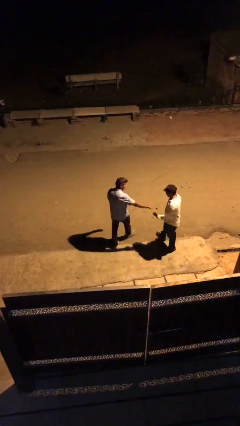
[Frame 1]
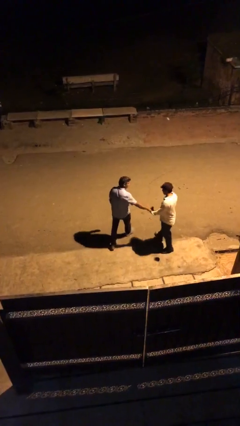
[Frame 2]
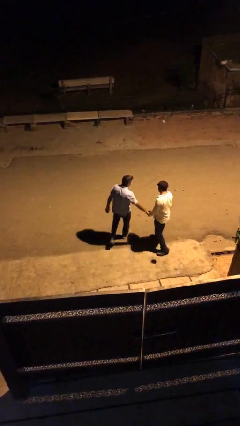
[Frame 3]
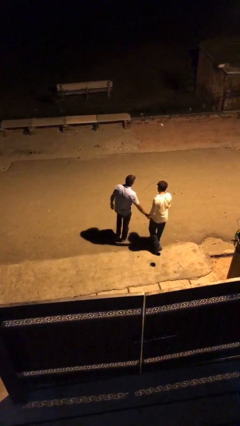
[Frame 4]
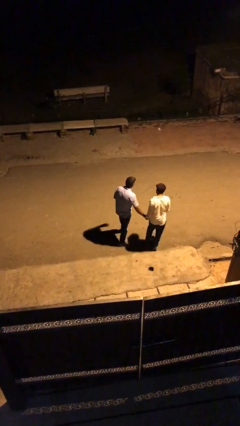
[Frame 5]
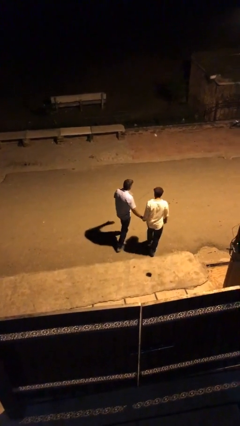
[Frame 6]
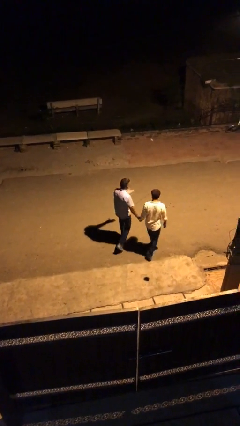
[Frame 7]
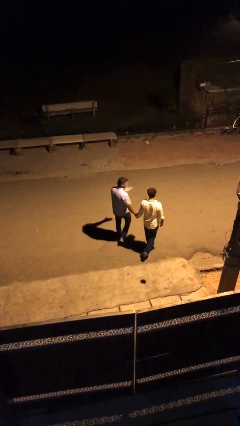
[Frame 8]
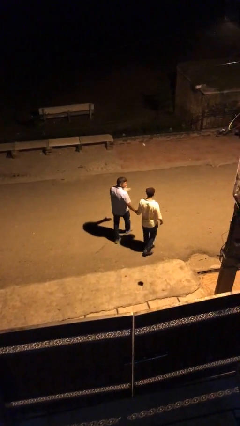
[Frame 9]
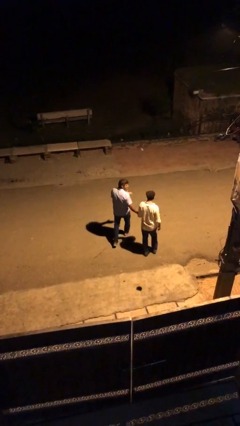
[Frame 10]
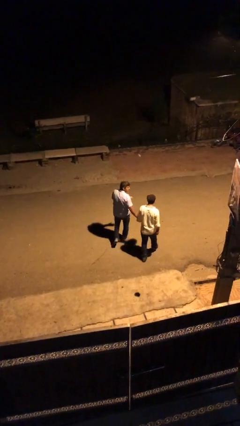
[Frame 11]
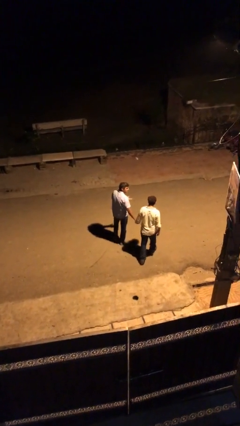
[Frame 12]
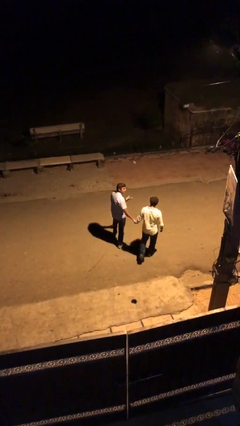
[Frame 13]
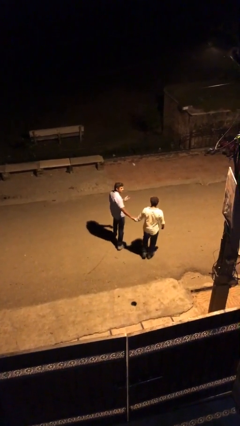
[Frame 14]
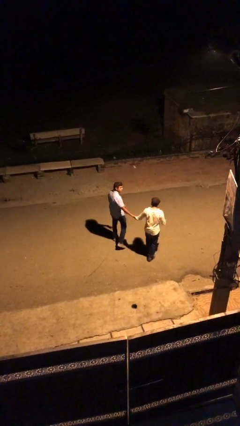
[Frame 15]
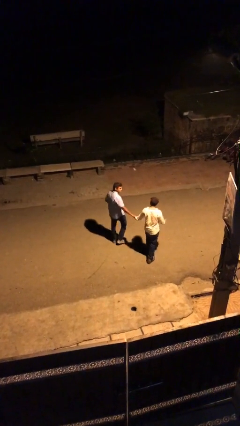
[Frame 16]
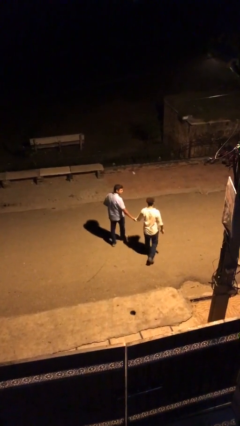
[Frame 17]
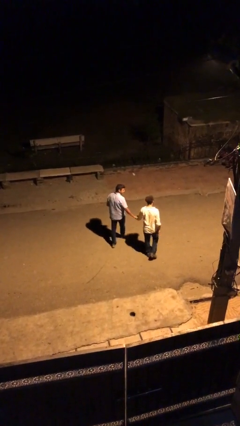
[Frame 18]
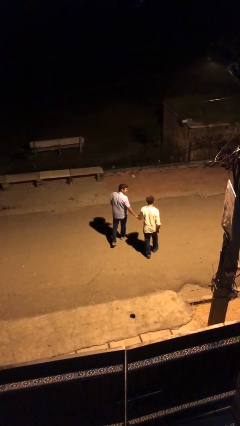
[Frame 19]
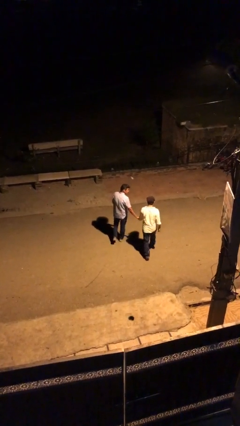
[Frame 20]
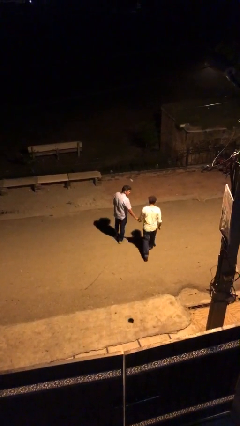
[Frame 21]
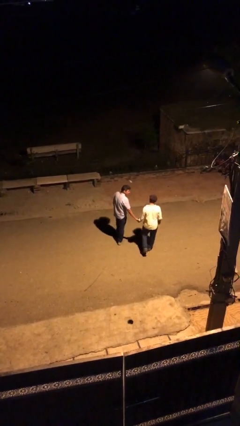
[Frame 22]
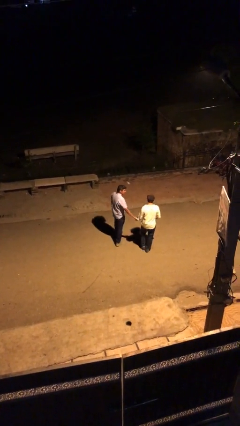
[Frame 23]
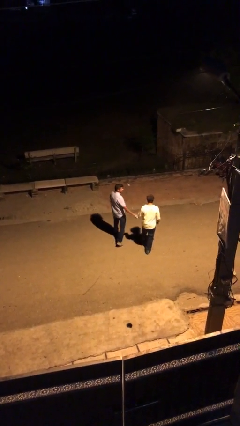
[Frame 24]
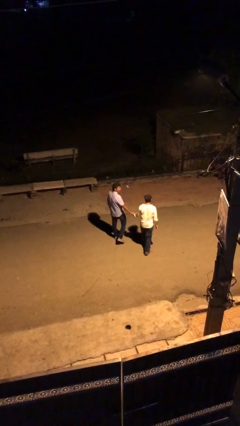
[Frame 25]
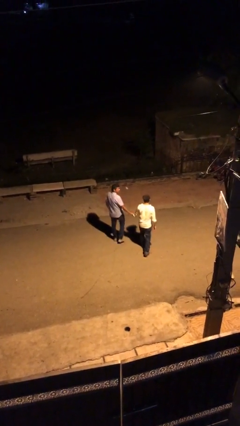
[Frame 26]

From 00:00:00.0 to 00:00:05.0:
person holds hand

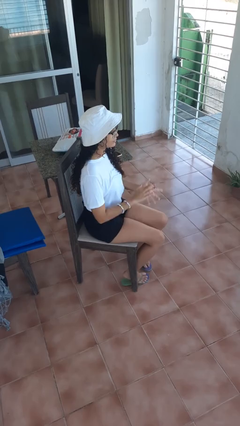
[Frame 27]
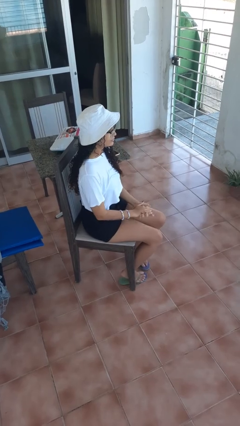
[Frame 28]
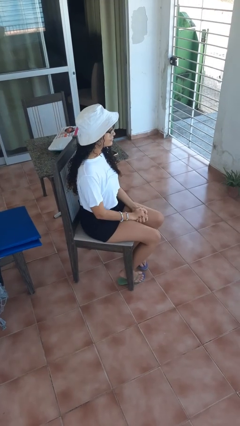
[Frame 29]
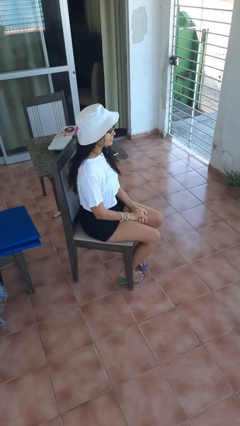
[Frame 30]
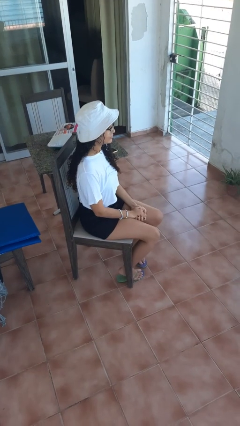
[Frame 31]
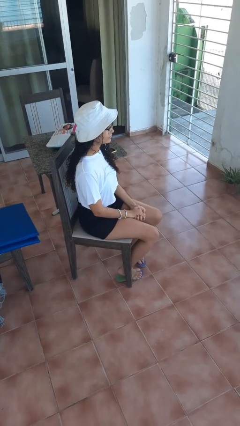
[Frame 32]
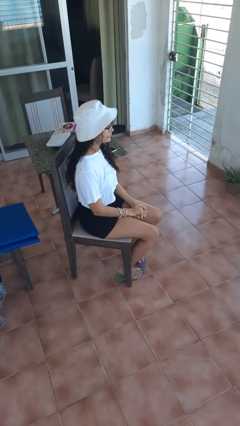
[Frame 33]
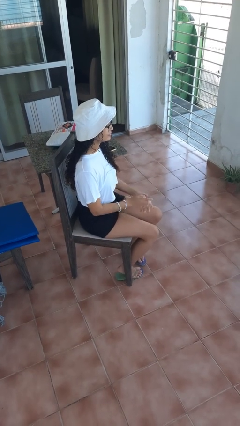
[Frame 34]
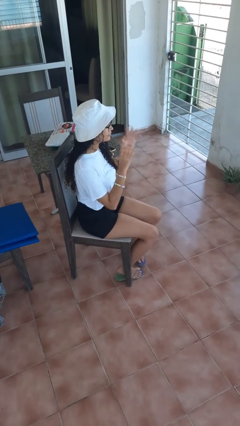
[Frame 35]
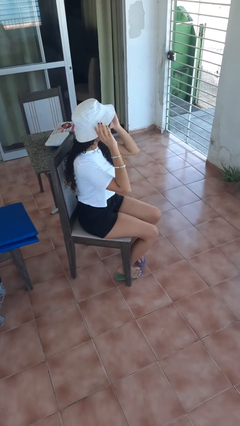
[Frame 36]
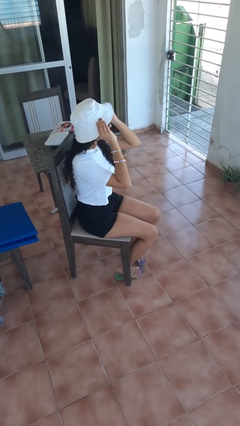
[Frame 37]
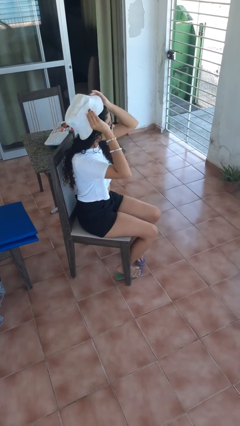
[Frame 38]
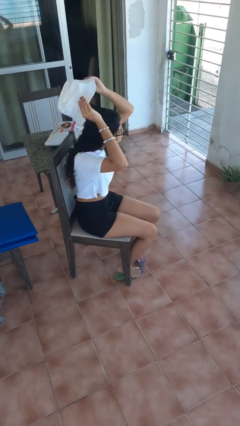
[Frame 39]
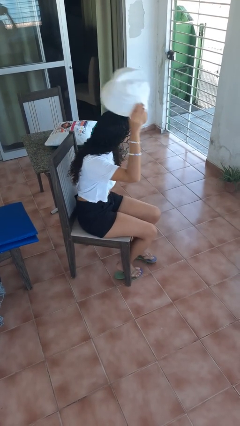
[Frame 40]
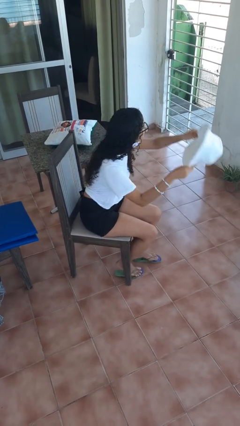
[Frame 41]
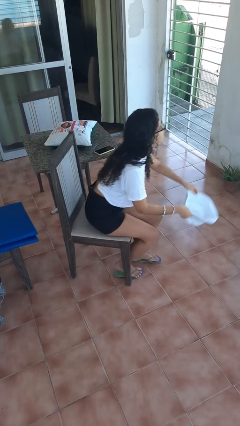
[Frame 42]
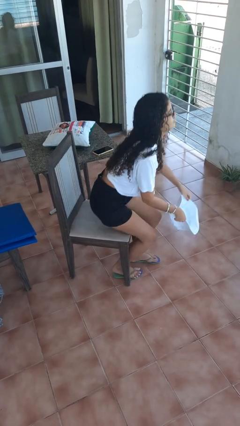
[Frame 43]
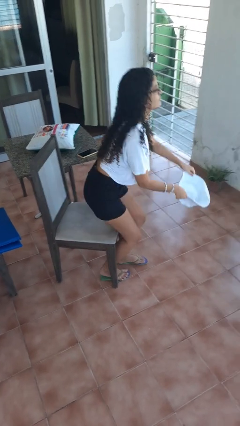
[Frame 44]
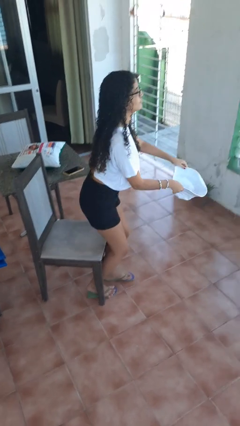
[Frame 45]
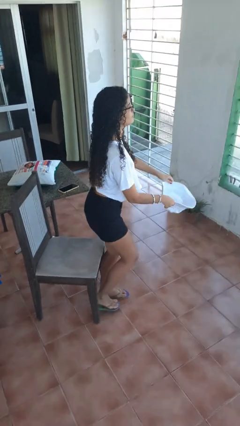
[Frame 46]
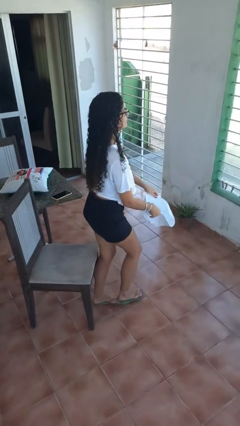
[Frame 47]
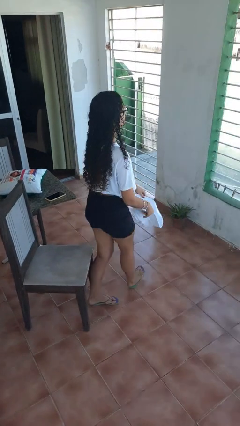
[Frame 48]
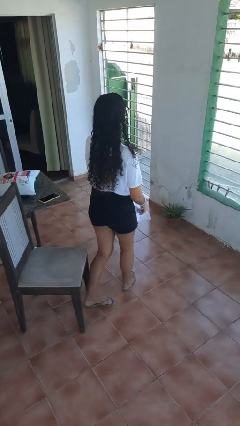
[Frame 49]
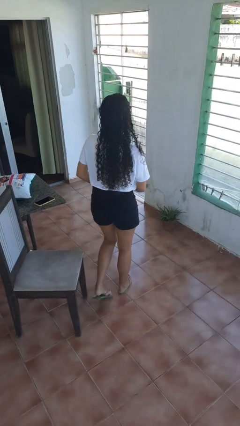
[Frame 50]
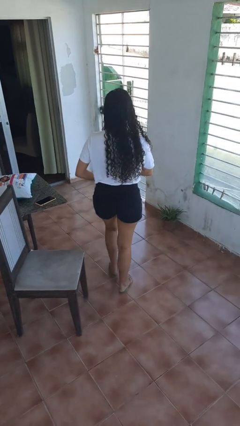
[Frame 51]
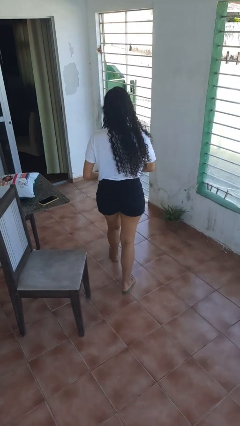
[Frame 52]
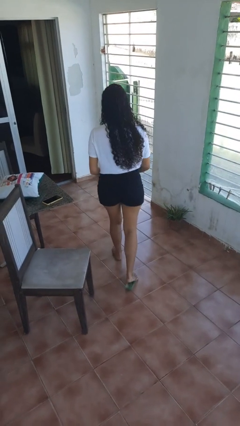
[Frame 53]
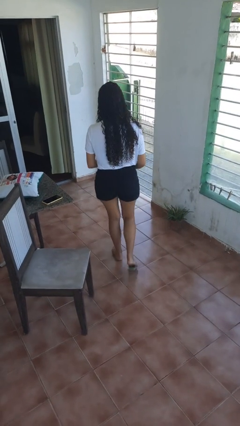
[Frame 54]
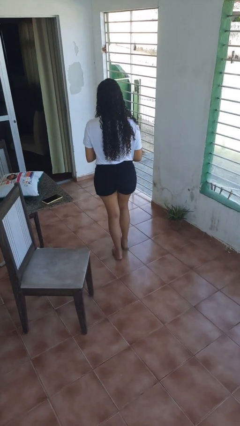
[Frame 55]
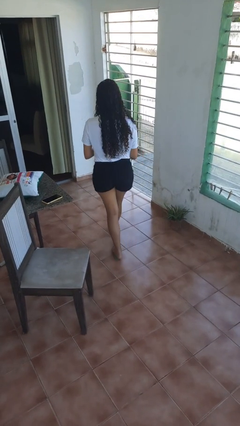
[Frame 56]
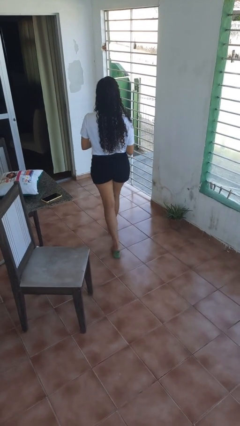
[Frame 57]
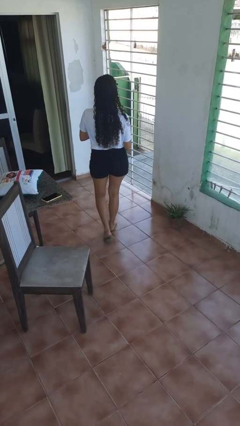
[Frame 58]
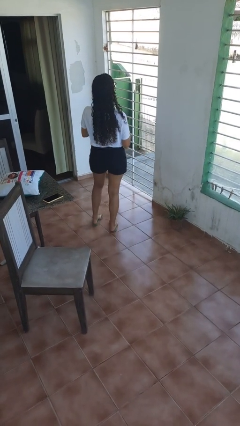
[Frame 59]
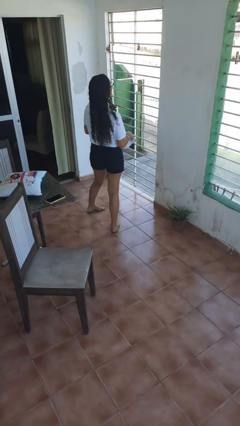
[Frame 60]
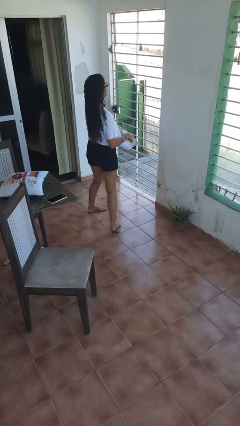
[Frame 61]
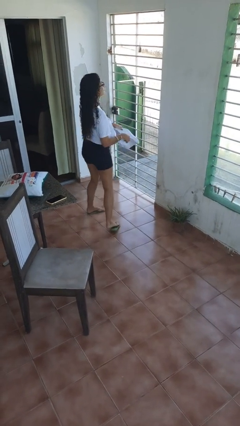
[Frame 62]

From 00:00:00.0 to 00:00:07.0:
person takes off hat

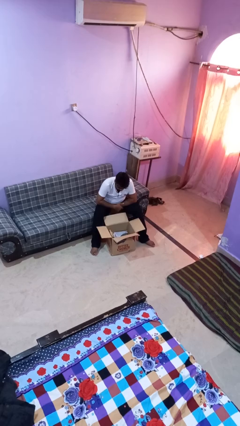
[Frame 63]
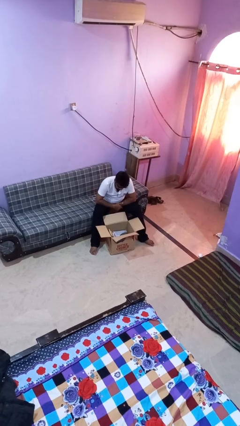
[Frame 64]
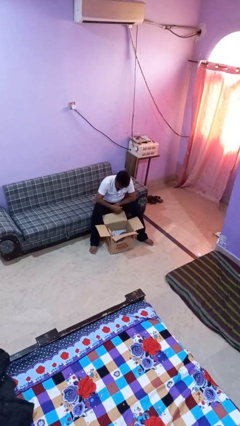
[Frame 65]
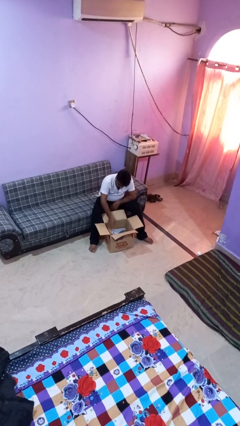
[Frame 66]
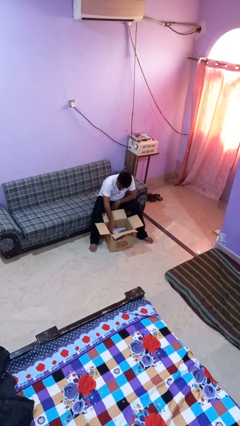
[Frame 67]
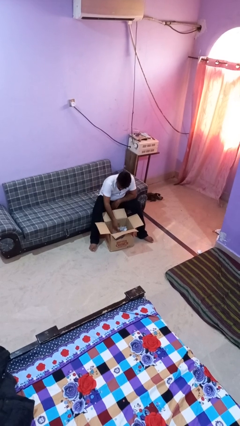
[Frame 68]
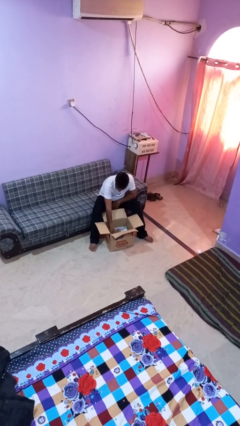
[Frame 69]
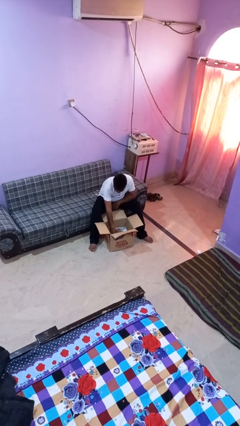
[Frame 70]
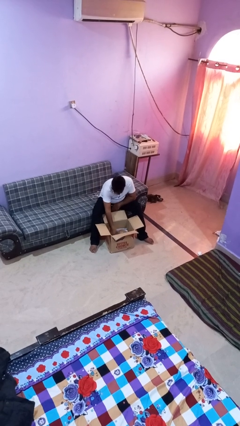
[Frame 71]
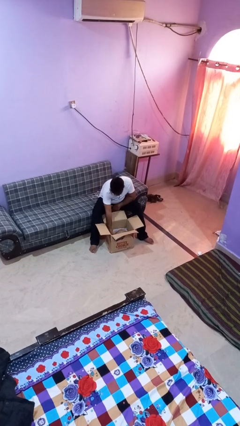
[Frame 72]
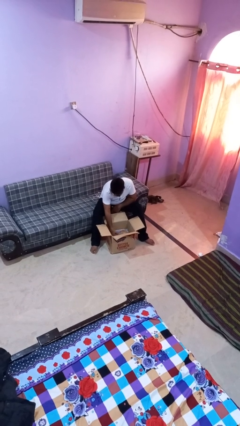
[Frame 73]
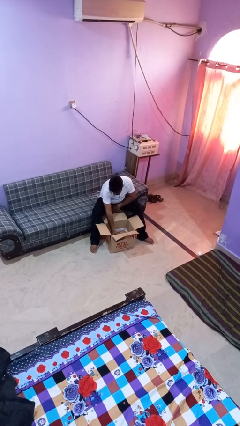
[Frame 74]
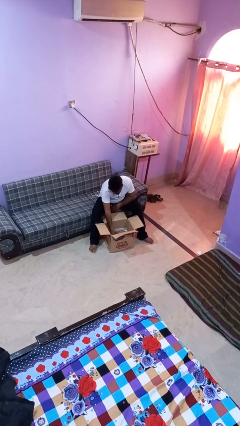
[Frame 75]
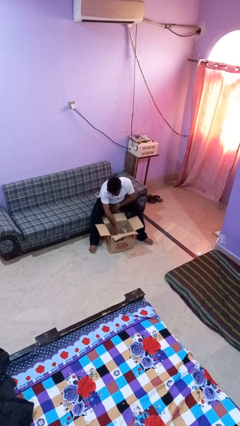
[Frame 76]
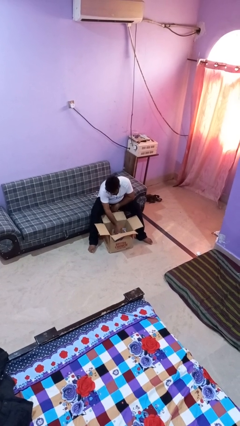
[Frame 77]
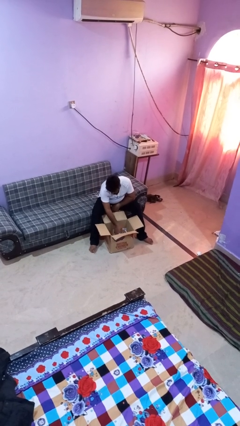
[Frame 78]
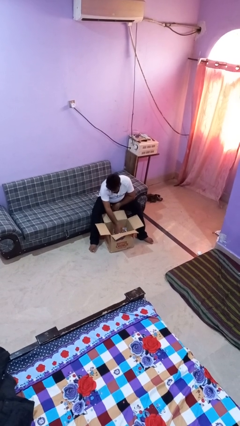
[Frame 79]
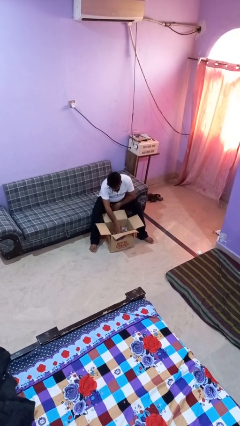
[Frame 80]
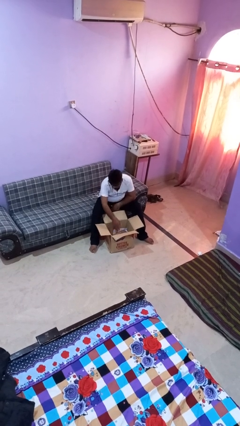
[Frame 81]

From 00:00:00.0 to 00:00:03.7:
person searches in box

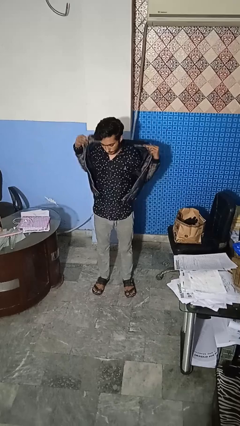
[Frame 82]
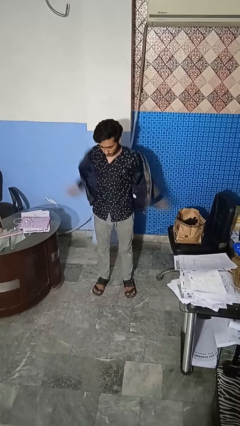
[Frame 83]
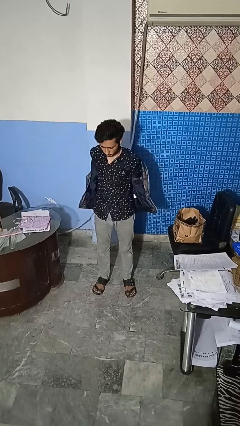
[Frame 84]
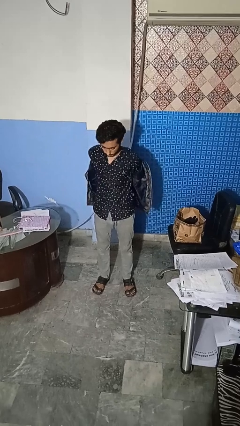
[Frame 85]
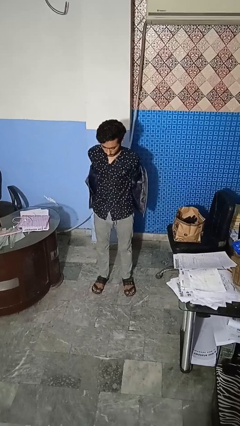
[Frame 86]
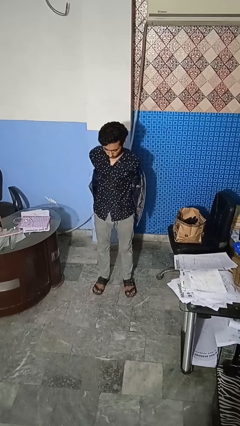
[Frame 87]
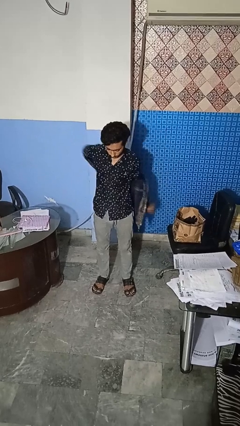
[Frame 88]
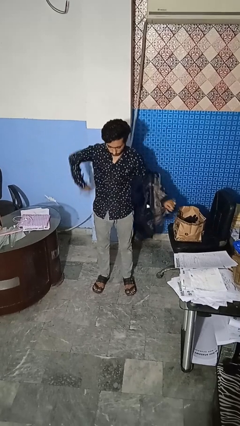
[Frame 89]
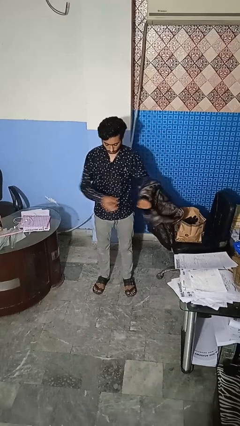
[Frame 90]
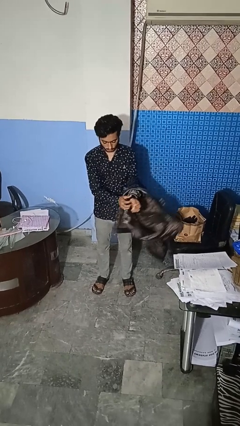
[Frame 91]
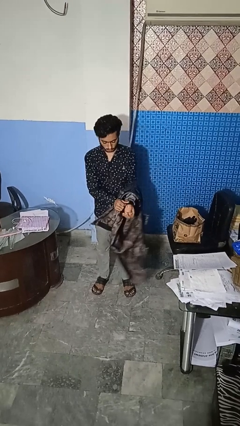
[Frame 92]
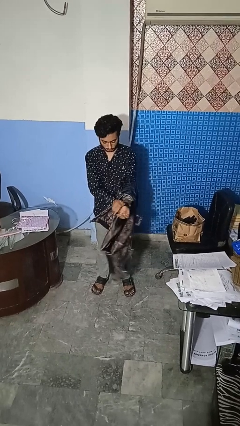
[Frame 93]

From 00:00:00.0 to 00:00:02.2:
person takes off jacket

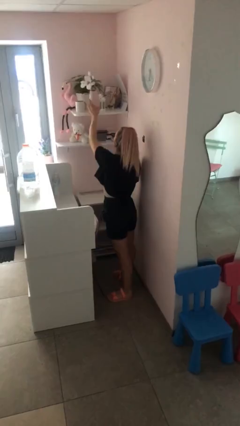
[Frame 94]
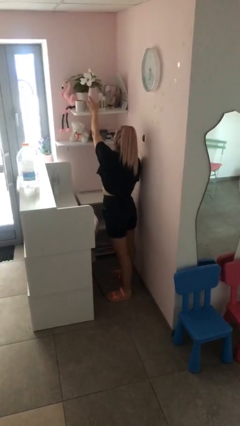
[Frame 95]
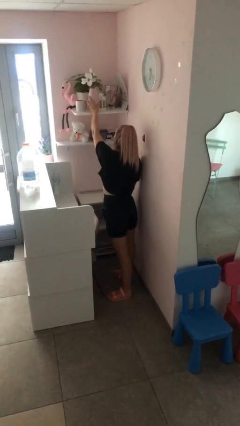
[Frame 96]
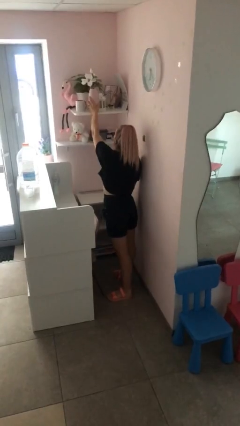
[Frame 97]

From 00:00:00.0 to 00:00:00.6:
person puts down object into cabinet
